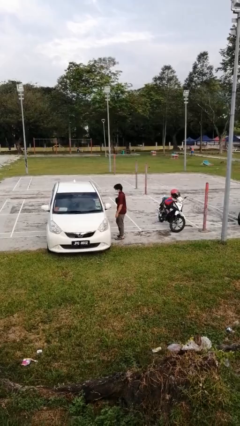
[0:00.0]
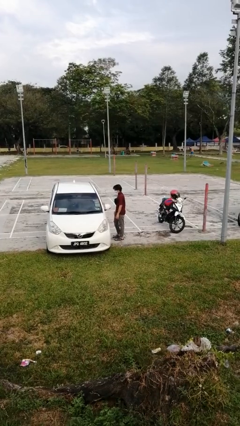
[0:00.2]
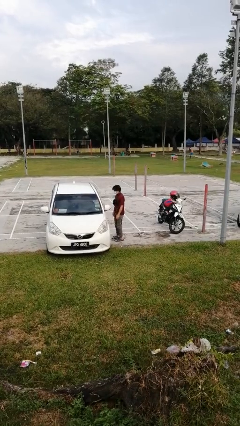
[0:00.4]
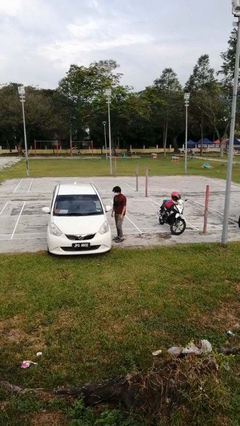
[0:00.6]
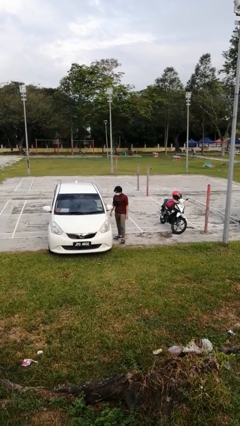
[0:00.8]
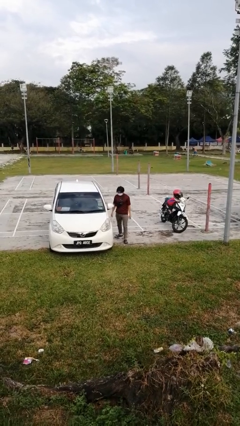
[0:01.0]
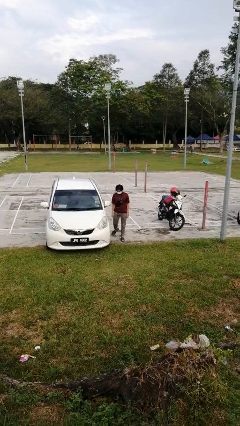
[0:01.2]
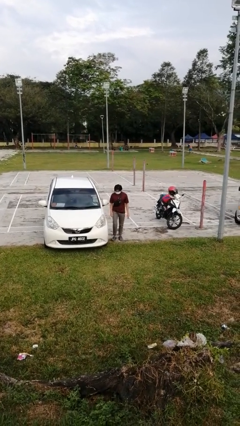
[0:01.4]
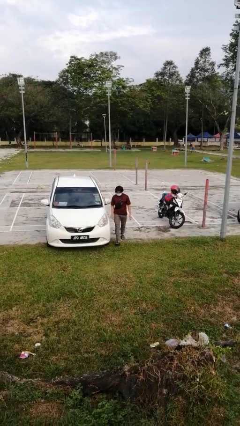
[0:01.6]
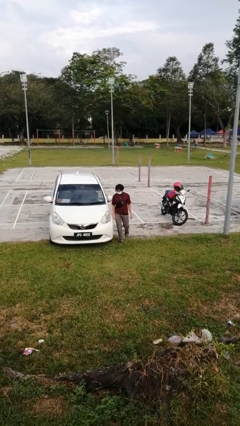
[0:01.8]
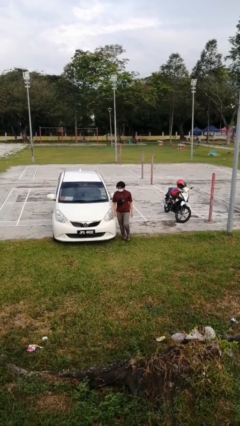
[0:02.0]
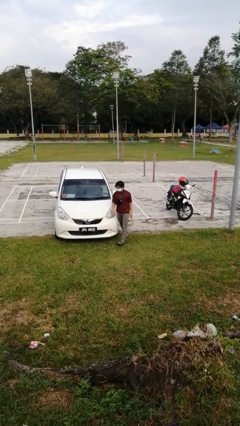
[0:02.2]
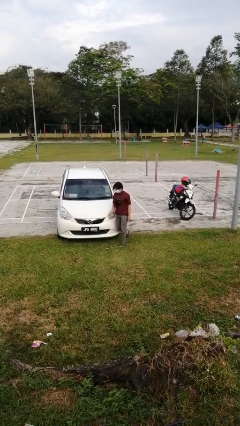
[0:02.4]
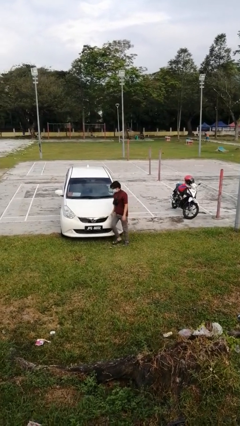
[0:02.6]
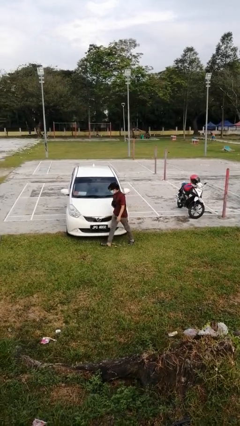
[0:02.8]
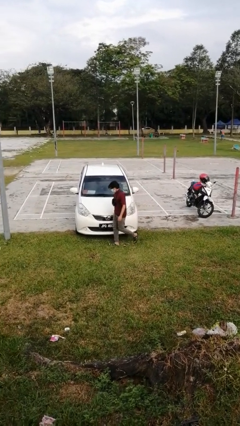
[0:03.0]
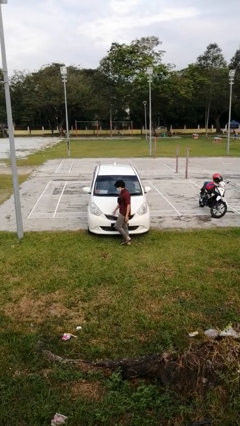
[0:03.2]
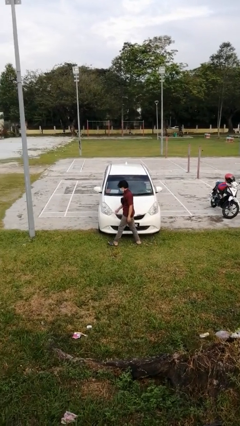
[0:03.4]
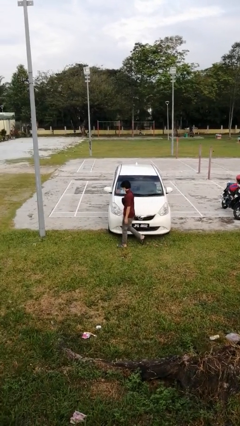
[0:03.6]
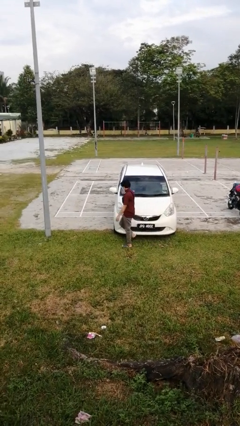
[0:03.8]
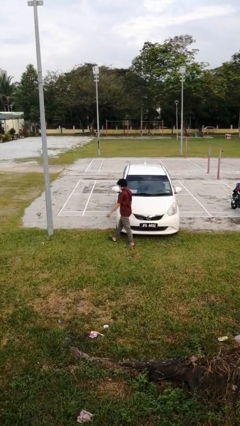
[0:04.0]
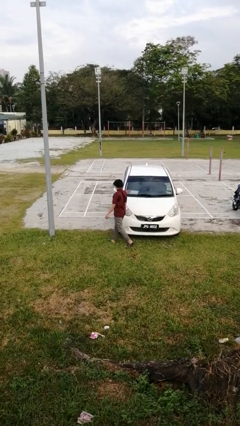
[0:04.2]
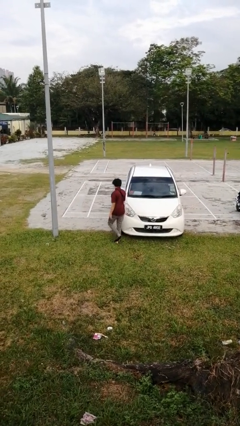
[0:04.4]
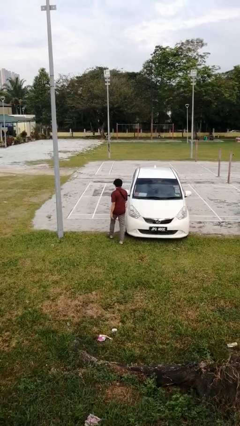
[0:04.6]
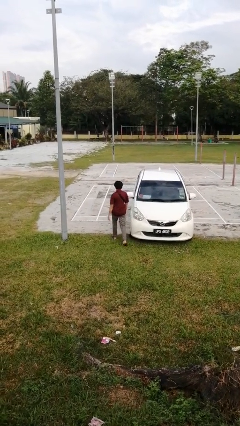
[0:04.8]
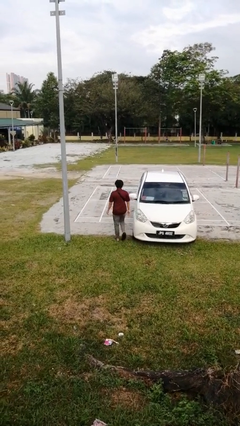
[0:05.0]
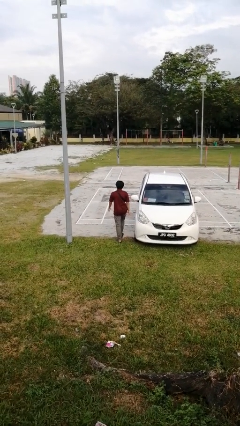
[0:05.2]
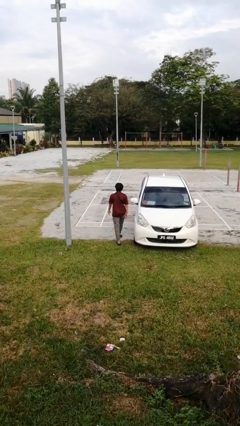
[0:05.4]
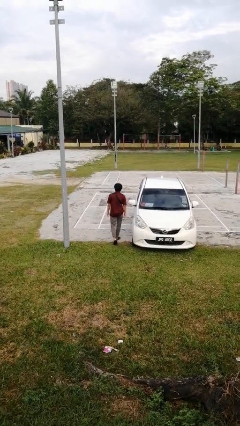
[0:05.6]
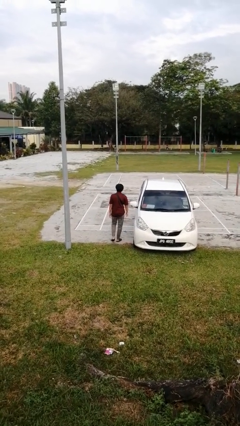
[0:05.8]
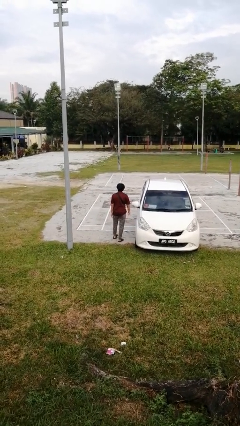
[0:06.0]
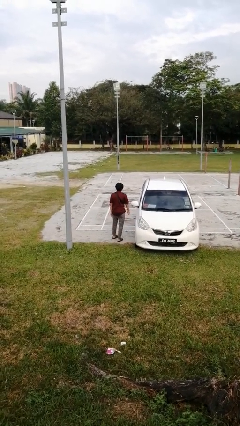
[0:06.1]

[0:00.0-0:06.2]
person walks around car

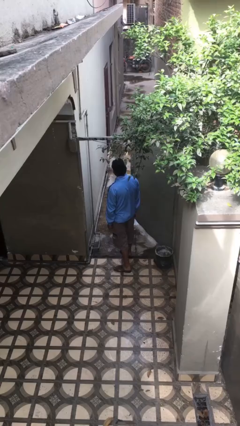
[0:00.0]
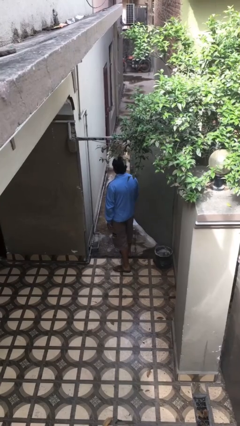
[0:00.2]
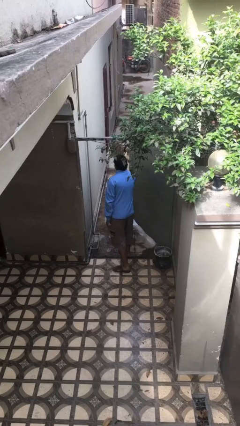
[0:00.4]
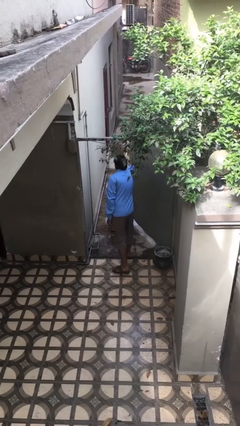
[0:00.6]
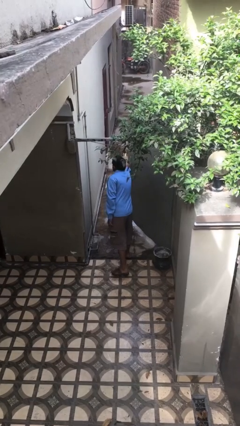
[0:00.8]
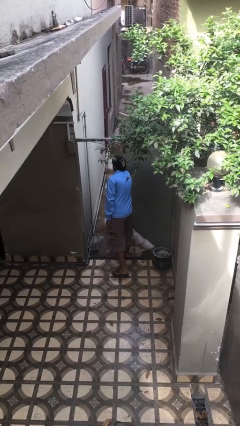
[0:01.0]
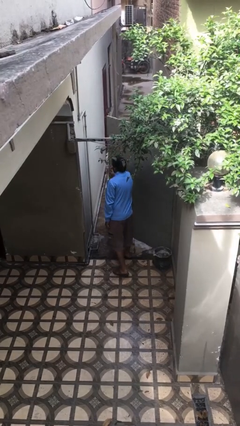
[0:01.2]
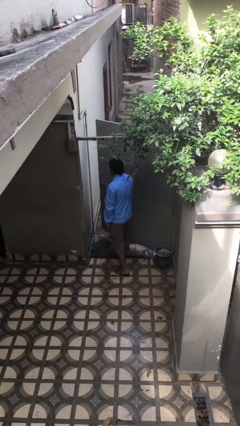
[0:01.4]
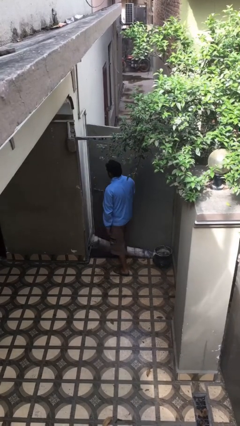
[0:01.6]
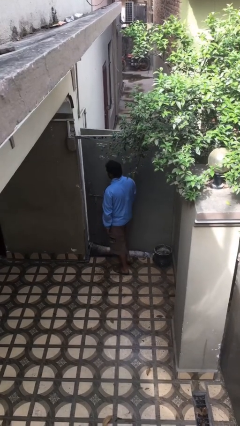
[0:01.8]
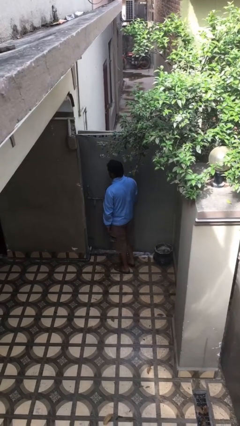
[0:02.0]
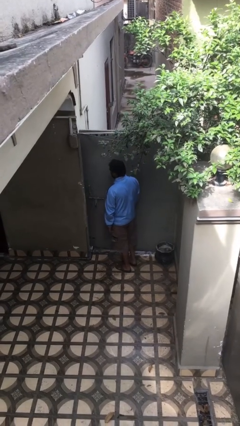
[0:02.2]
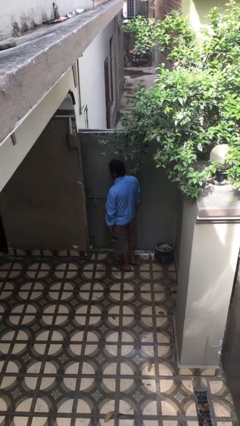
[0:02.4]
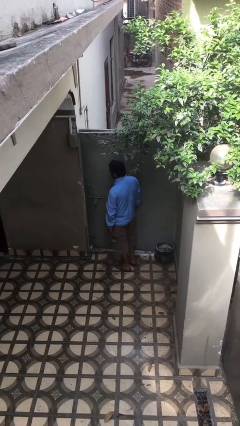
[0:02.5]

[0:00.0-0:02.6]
person closes facility door

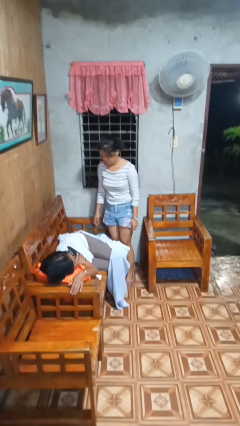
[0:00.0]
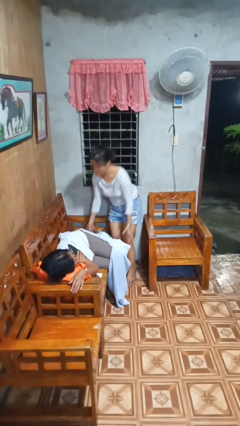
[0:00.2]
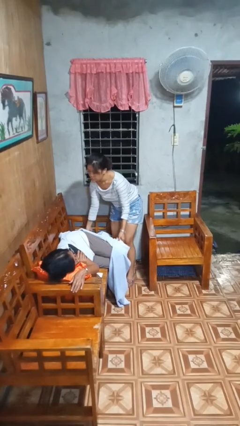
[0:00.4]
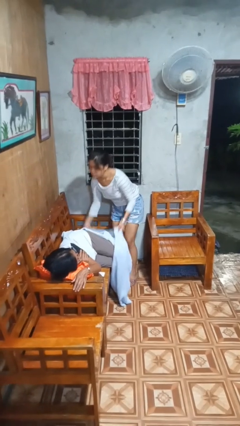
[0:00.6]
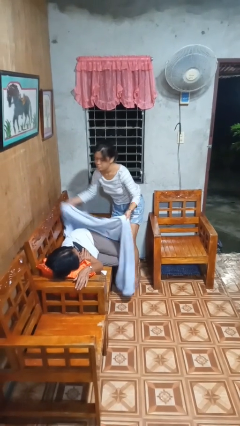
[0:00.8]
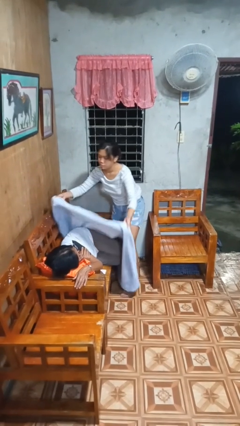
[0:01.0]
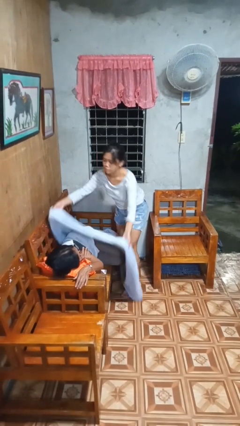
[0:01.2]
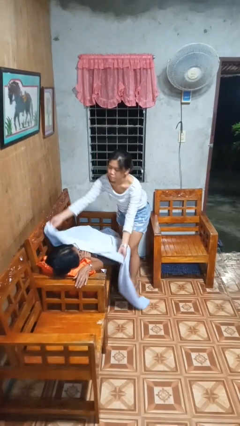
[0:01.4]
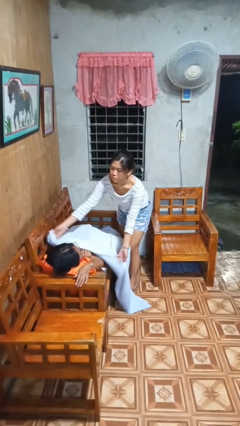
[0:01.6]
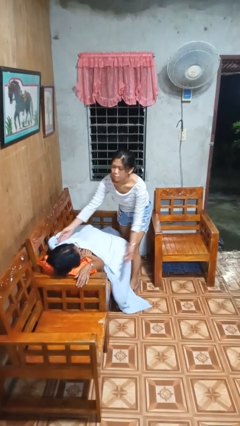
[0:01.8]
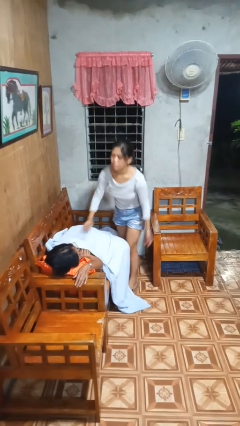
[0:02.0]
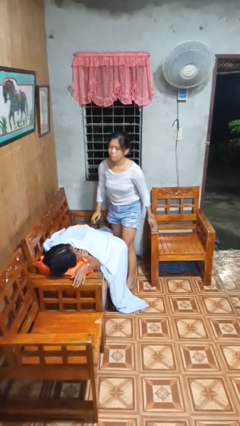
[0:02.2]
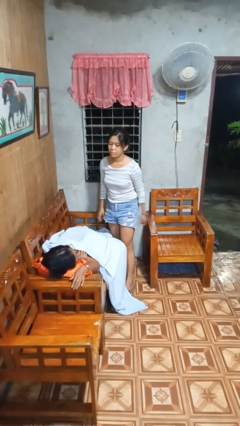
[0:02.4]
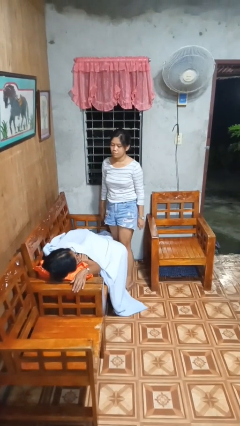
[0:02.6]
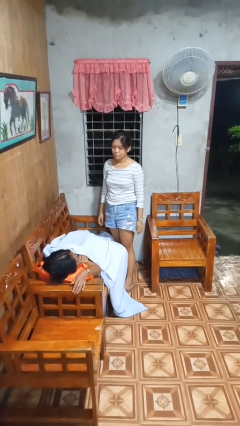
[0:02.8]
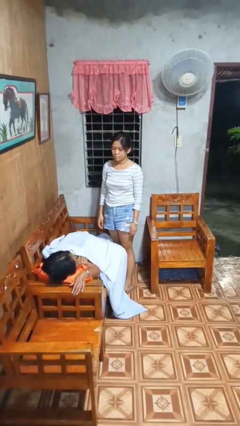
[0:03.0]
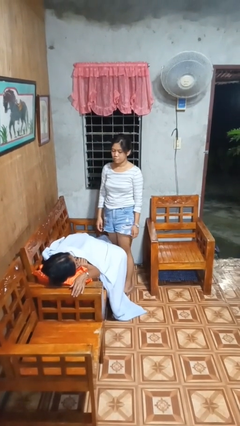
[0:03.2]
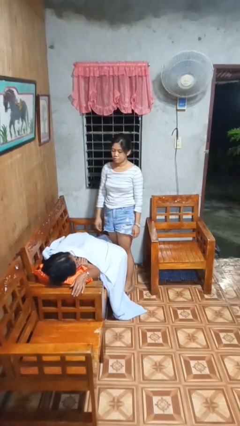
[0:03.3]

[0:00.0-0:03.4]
person covers friend with blanket

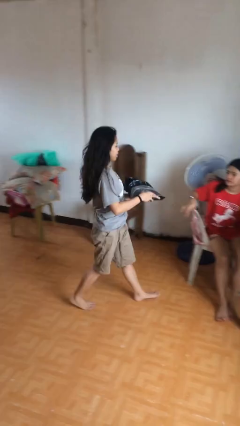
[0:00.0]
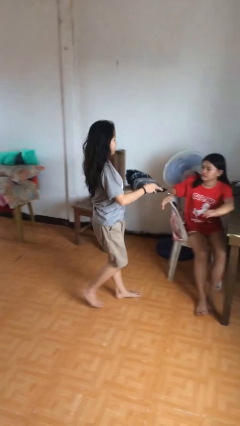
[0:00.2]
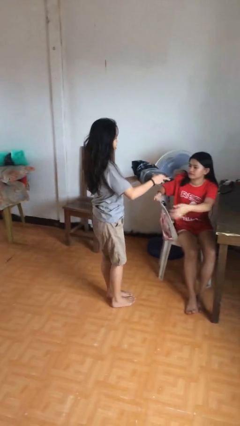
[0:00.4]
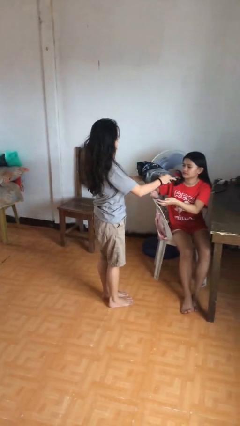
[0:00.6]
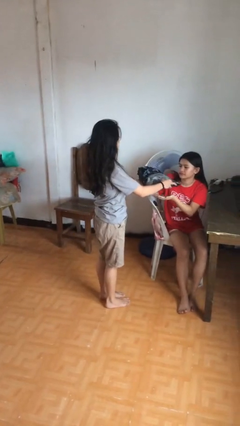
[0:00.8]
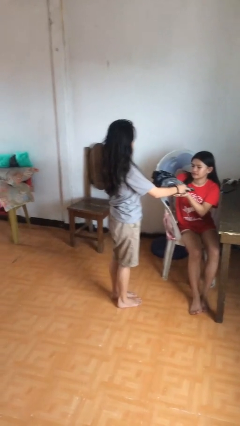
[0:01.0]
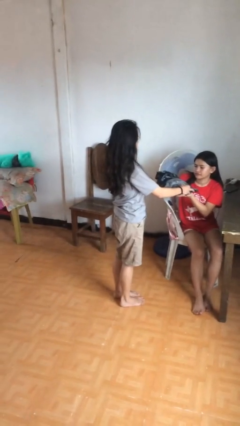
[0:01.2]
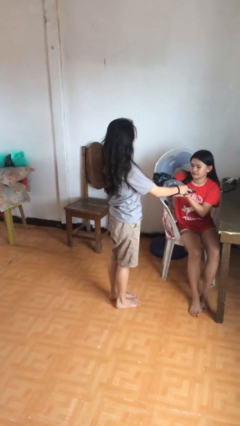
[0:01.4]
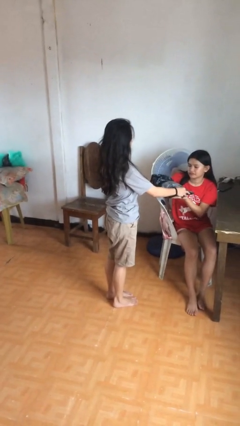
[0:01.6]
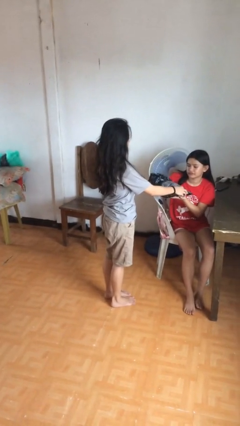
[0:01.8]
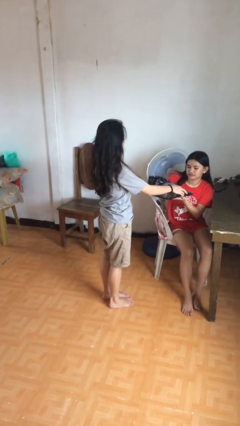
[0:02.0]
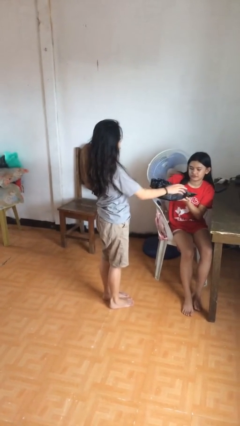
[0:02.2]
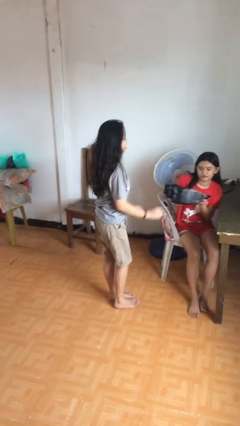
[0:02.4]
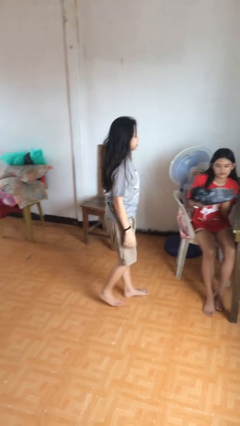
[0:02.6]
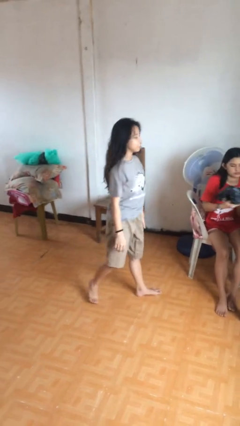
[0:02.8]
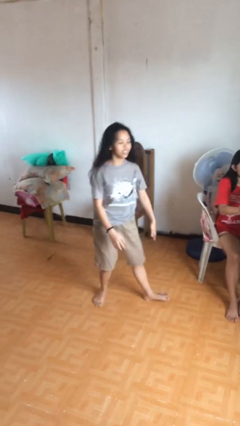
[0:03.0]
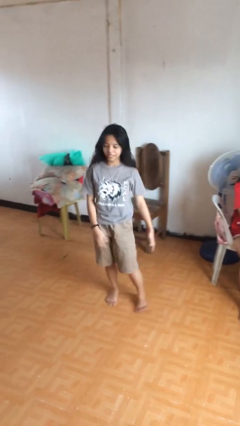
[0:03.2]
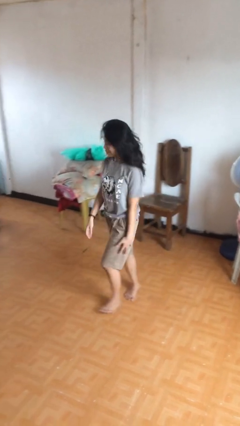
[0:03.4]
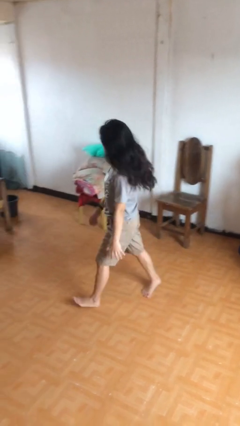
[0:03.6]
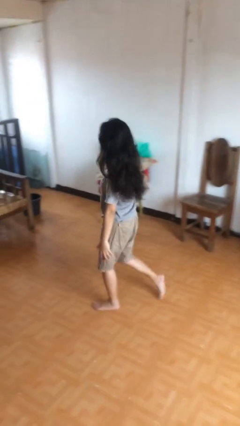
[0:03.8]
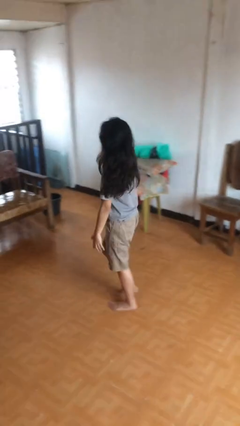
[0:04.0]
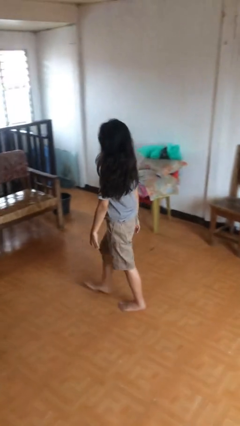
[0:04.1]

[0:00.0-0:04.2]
person transfers object to person

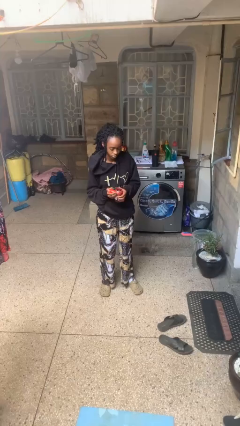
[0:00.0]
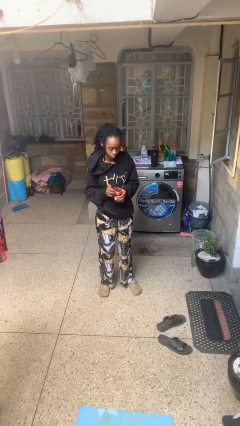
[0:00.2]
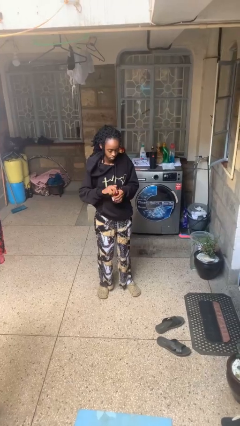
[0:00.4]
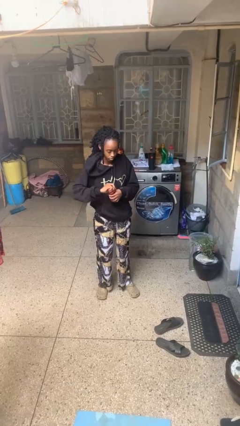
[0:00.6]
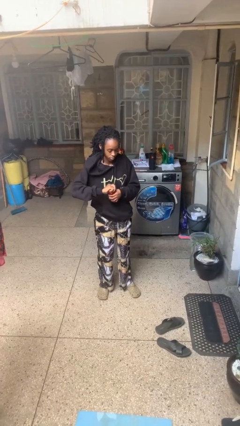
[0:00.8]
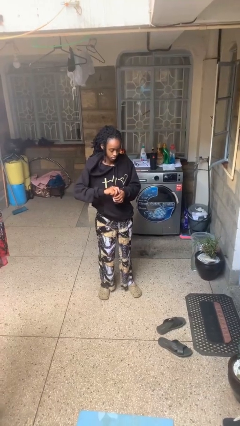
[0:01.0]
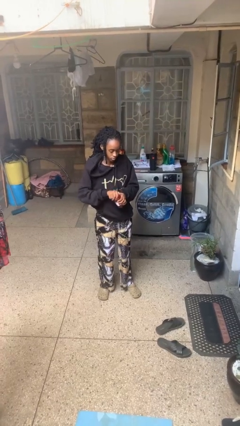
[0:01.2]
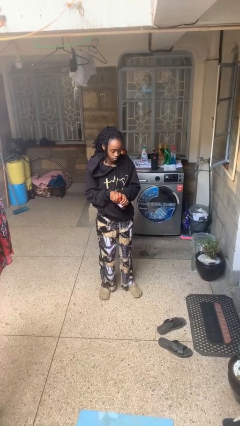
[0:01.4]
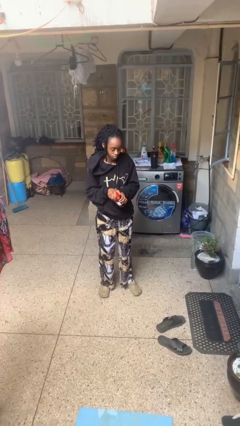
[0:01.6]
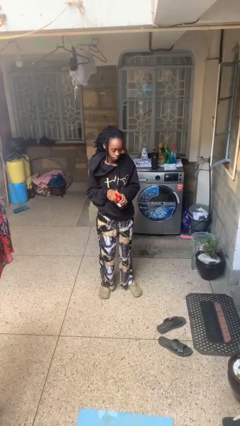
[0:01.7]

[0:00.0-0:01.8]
person closes jar
